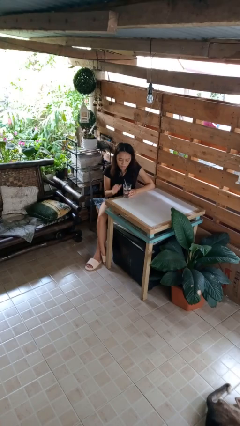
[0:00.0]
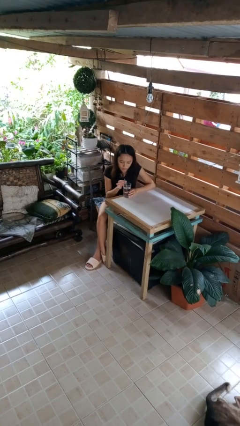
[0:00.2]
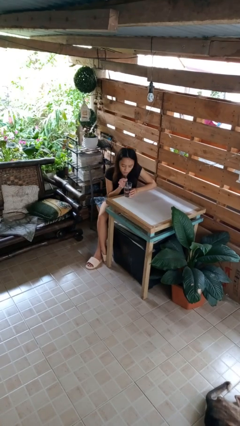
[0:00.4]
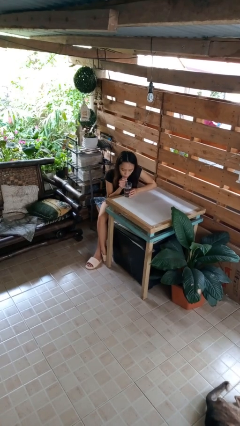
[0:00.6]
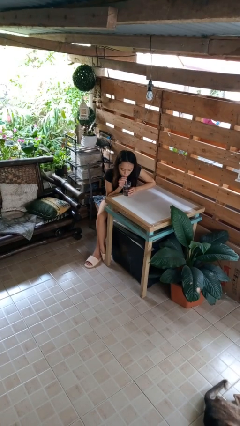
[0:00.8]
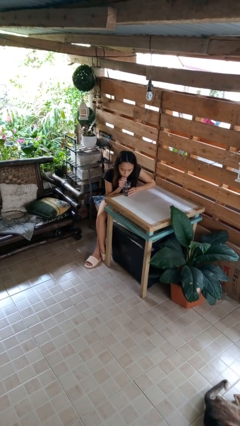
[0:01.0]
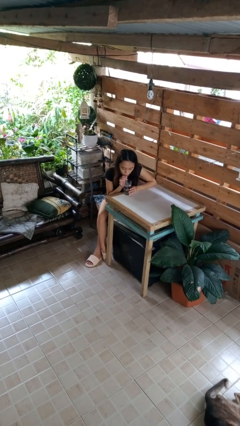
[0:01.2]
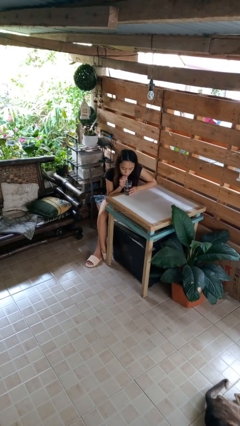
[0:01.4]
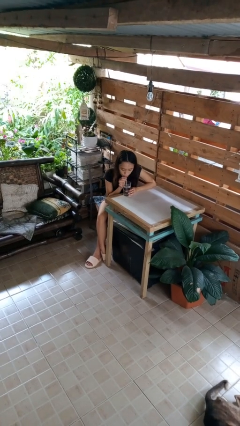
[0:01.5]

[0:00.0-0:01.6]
person drinks from straw

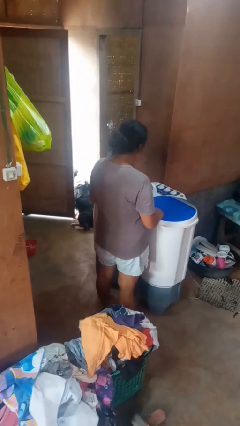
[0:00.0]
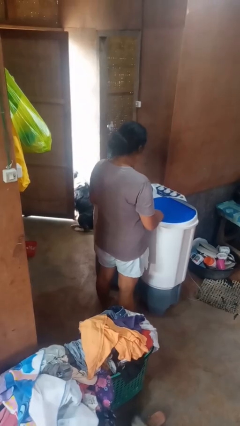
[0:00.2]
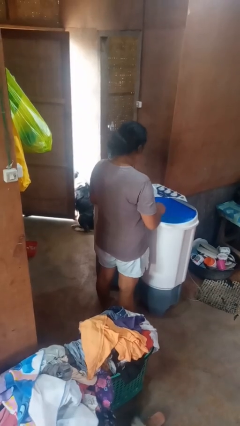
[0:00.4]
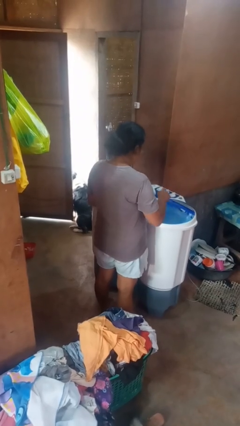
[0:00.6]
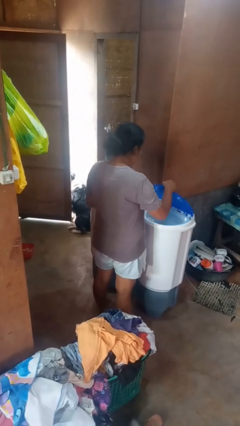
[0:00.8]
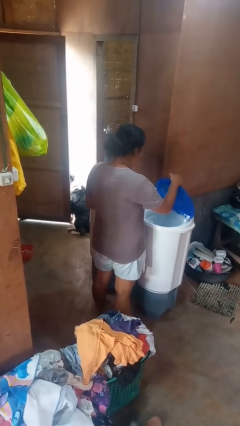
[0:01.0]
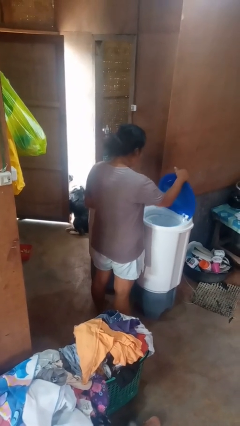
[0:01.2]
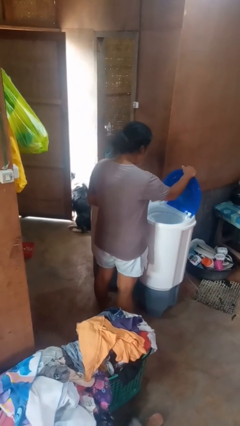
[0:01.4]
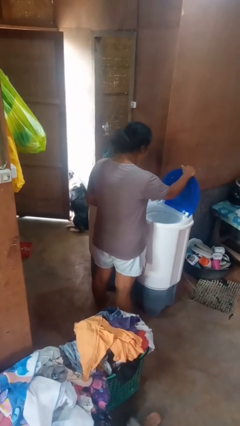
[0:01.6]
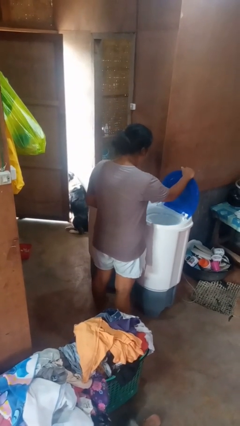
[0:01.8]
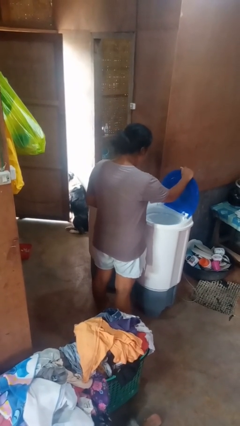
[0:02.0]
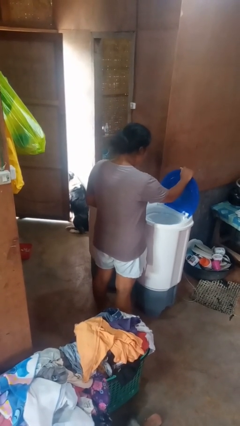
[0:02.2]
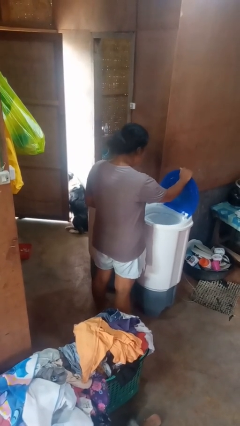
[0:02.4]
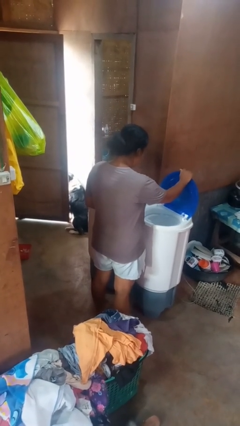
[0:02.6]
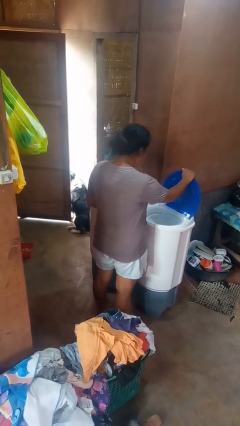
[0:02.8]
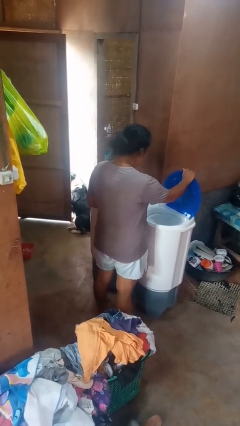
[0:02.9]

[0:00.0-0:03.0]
person opens clothes washer

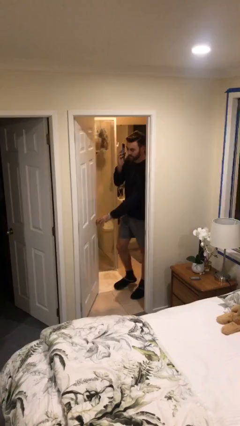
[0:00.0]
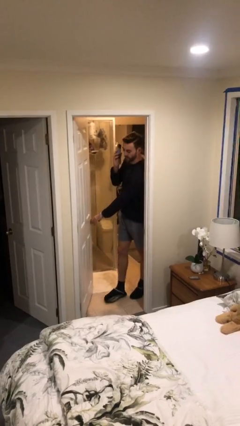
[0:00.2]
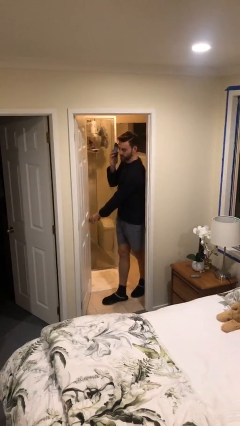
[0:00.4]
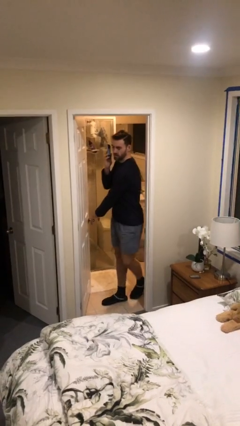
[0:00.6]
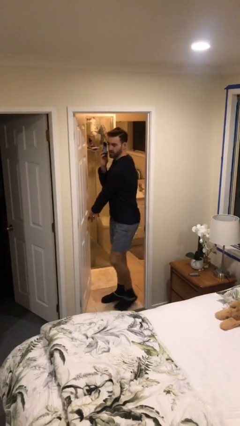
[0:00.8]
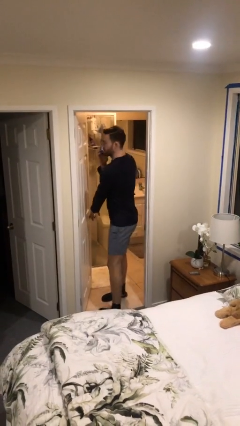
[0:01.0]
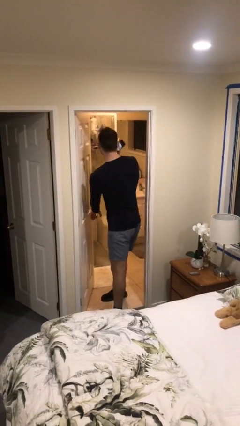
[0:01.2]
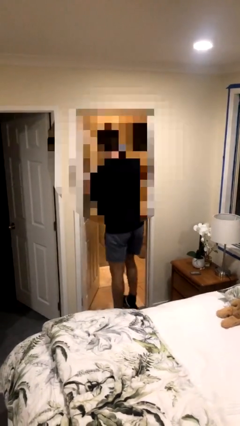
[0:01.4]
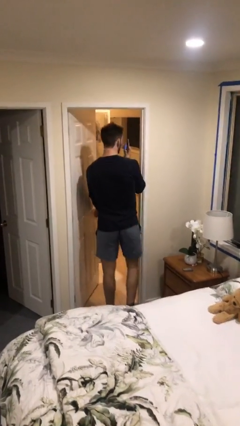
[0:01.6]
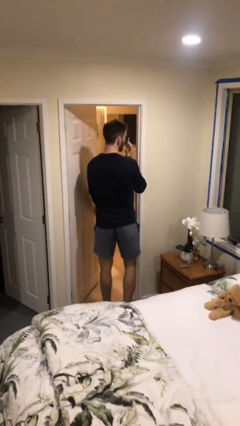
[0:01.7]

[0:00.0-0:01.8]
person enters scene through structure

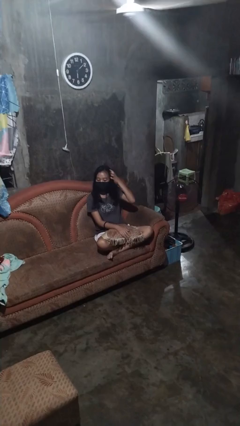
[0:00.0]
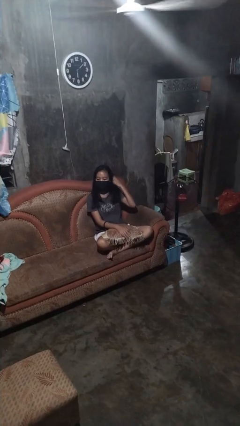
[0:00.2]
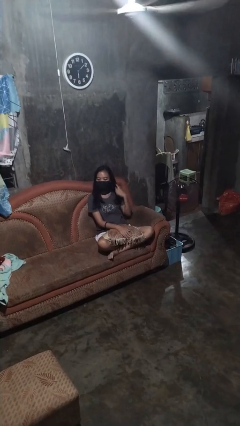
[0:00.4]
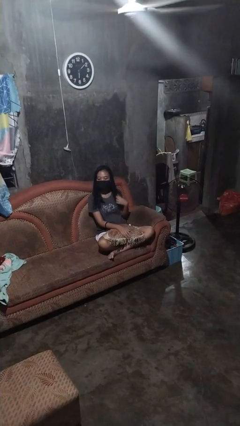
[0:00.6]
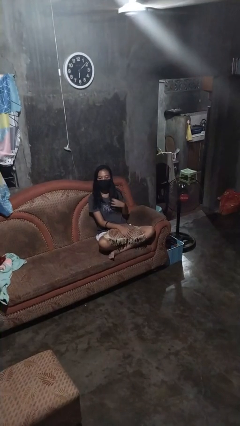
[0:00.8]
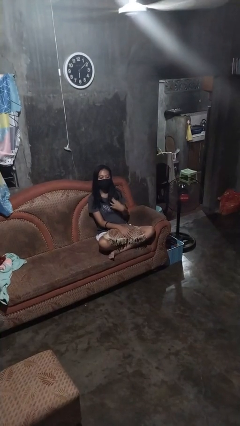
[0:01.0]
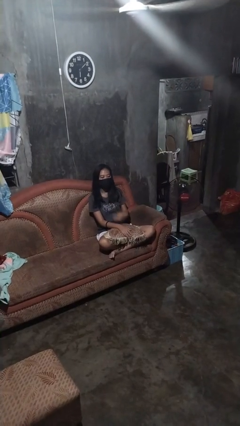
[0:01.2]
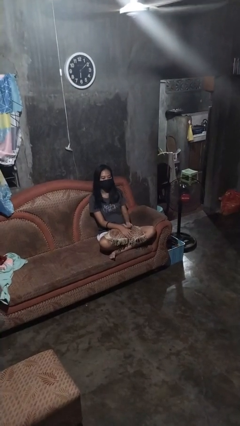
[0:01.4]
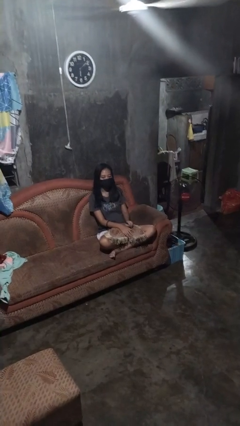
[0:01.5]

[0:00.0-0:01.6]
person strokes hair

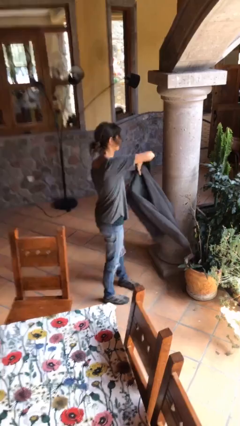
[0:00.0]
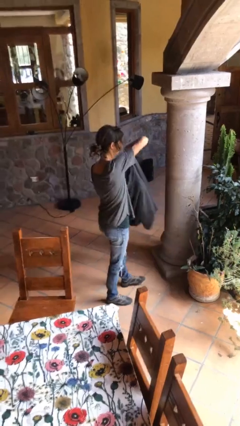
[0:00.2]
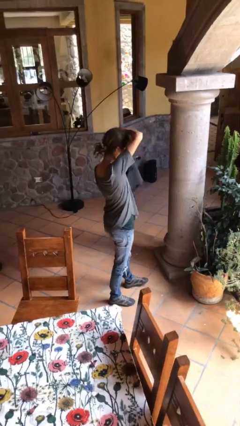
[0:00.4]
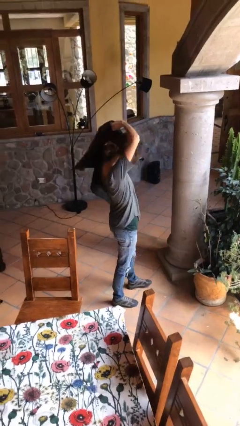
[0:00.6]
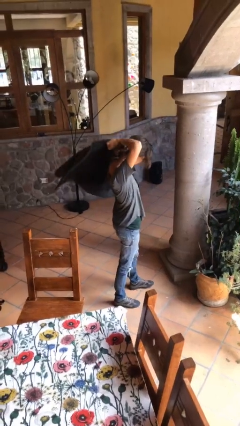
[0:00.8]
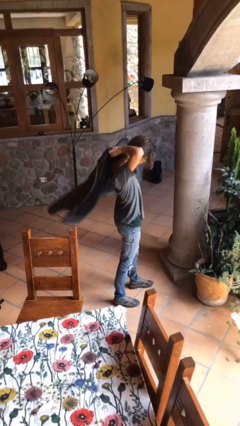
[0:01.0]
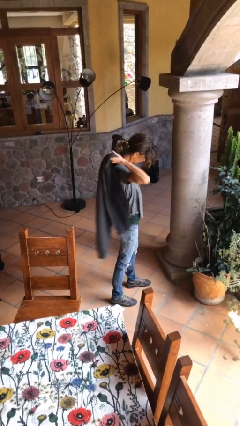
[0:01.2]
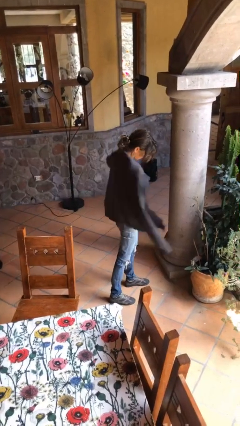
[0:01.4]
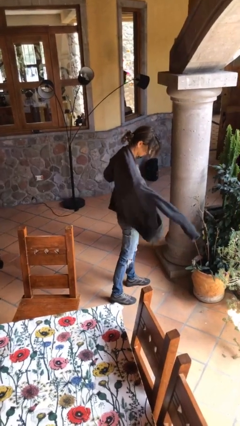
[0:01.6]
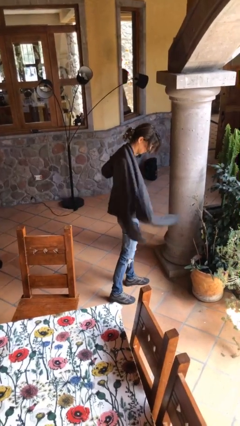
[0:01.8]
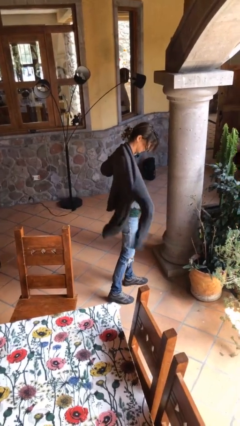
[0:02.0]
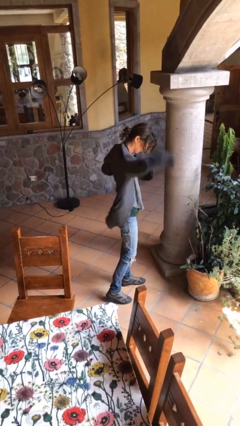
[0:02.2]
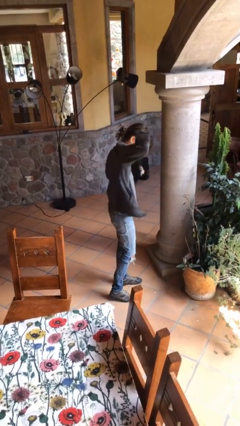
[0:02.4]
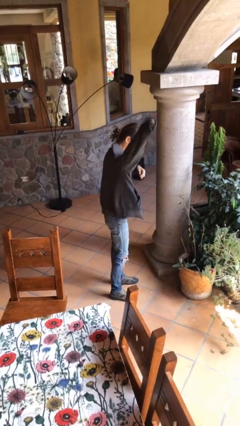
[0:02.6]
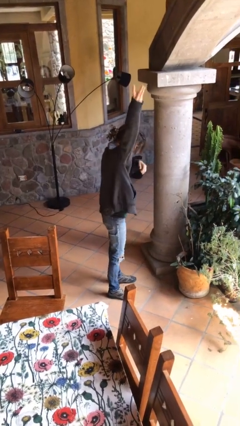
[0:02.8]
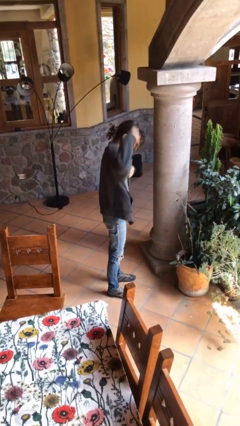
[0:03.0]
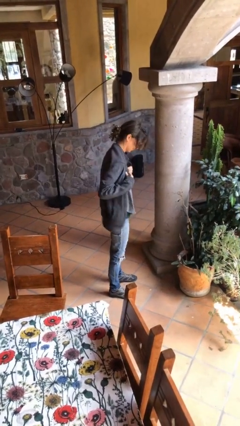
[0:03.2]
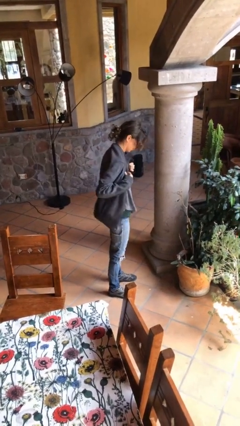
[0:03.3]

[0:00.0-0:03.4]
person puts on jacket

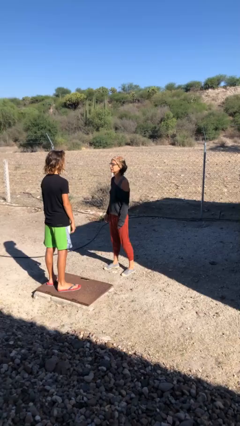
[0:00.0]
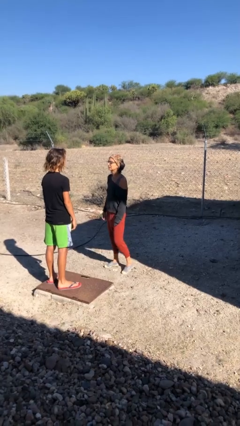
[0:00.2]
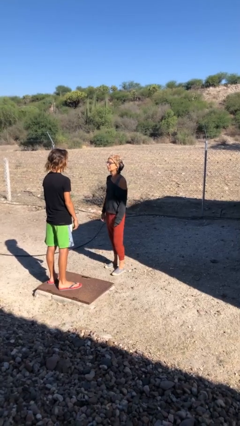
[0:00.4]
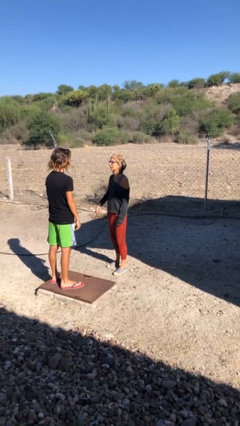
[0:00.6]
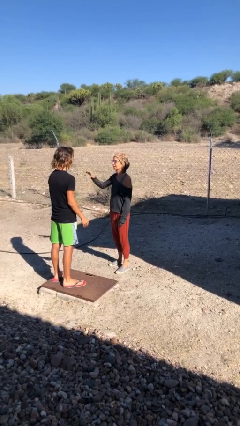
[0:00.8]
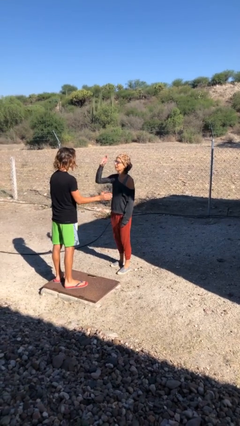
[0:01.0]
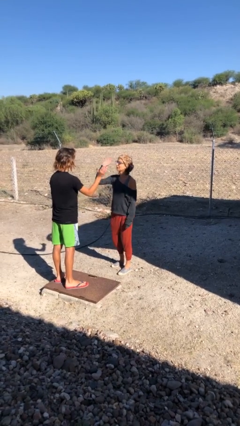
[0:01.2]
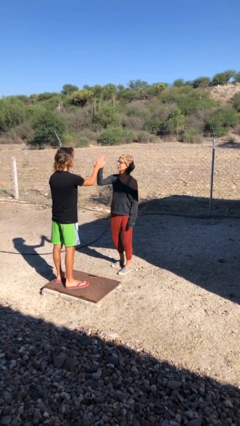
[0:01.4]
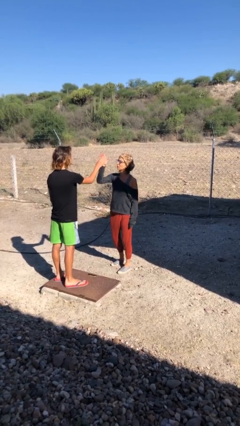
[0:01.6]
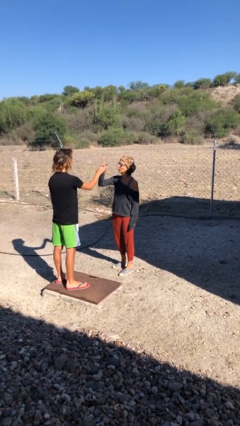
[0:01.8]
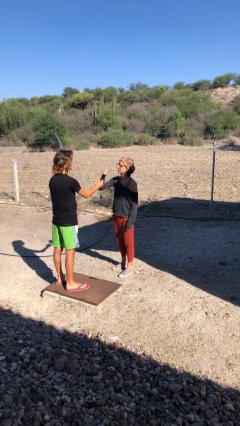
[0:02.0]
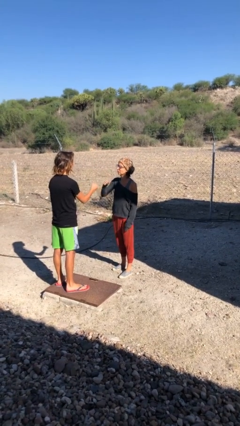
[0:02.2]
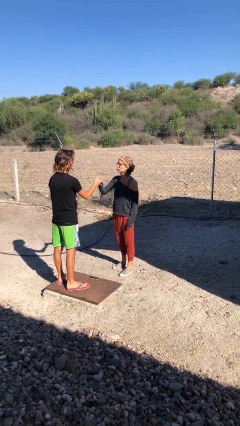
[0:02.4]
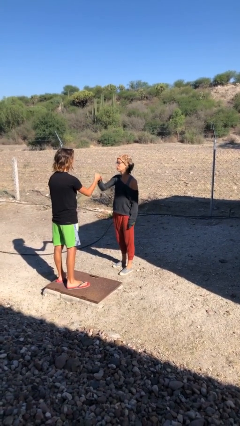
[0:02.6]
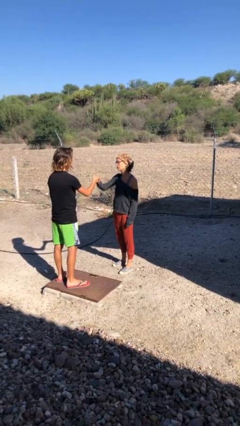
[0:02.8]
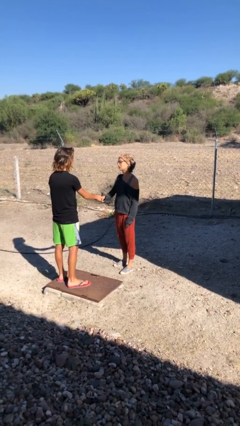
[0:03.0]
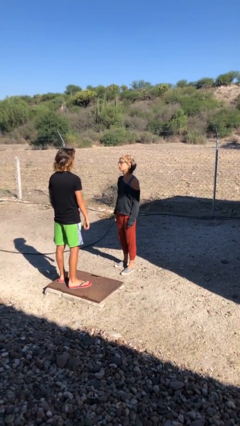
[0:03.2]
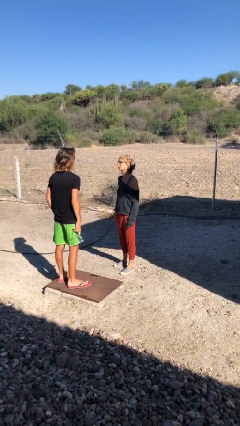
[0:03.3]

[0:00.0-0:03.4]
person highfives hand

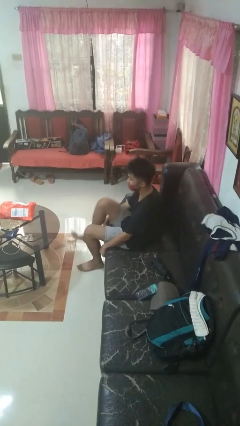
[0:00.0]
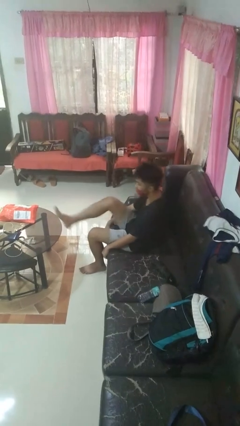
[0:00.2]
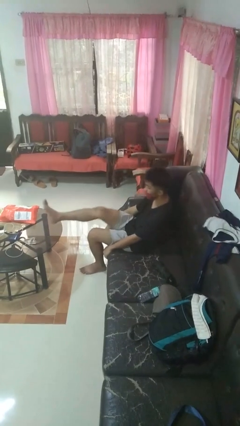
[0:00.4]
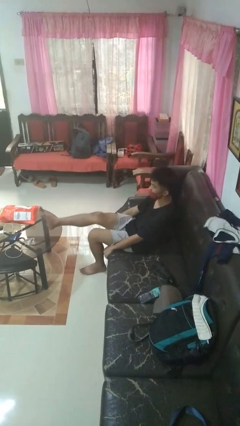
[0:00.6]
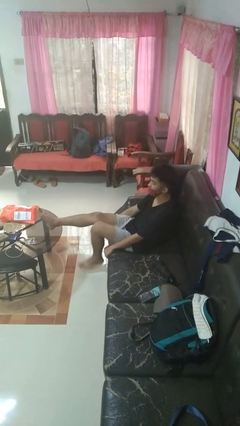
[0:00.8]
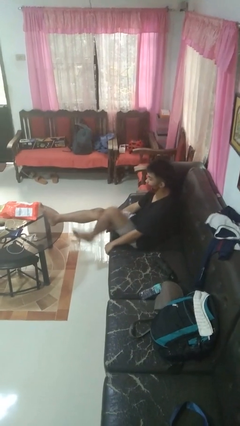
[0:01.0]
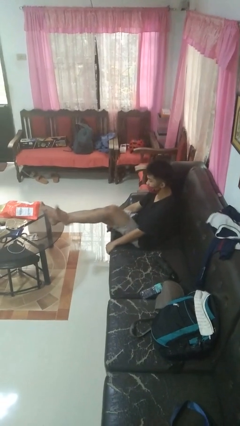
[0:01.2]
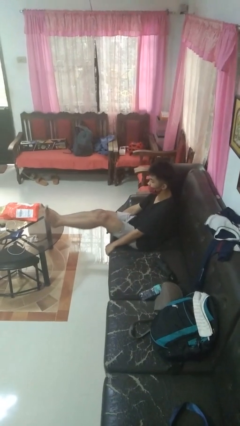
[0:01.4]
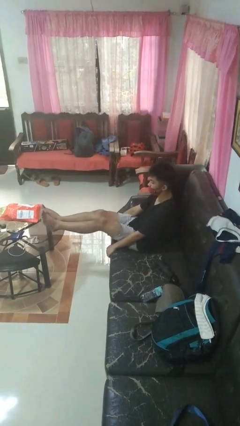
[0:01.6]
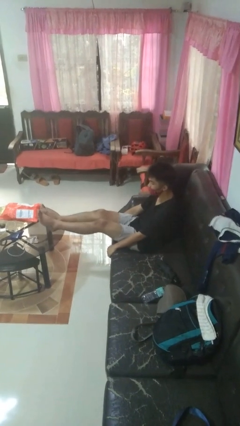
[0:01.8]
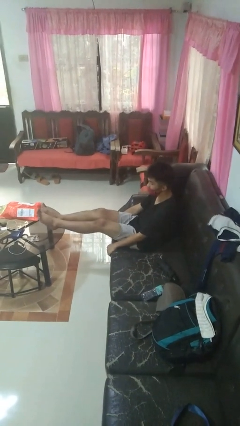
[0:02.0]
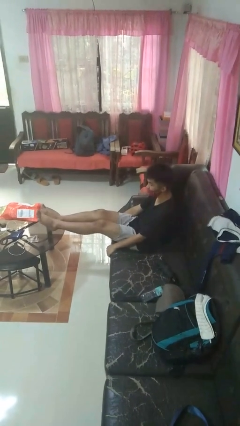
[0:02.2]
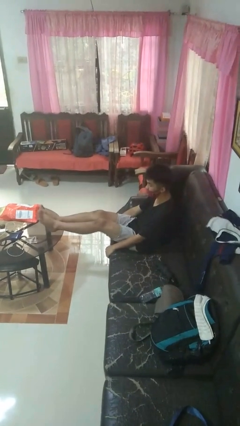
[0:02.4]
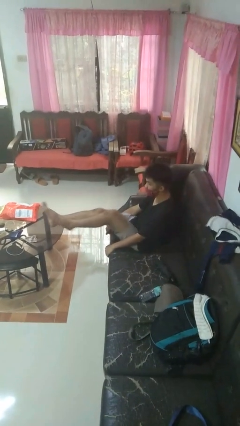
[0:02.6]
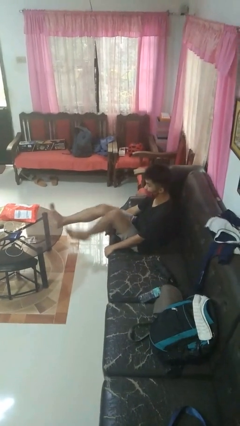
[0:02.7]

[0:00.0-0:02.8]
person puts feet up
